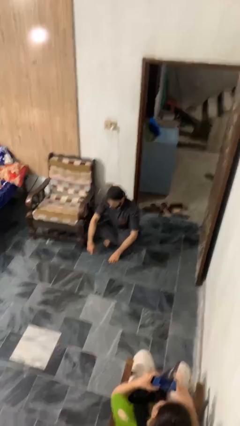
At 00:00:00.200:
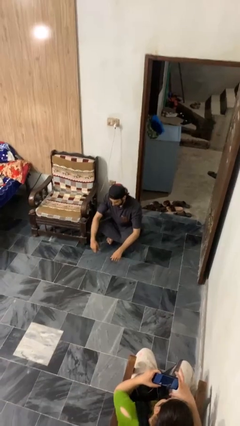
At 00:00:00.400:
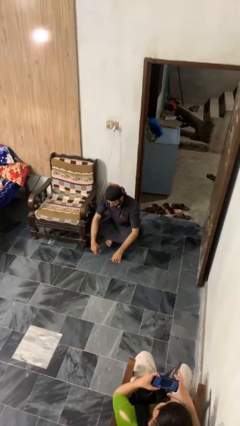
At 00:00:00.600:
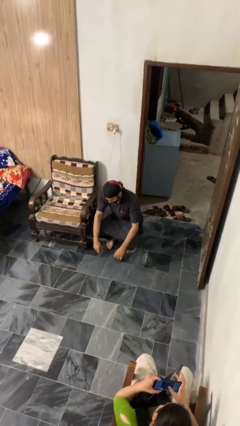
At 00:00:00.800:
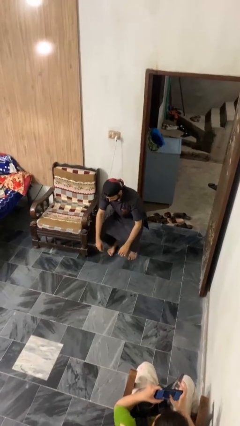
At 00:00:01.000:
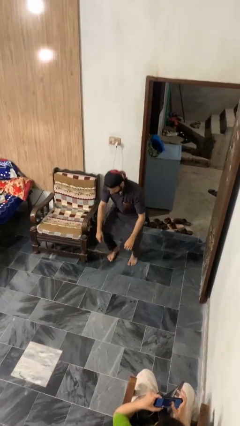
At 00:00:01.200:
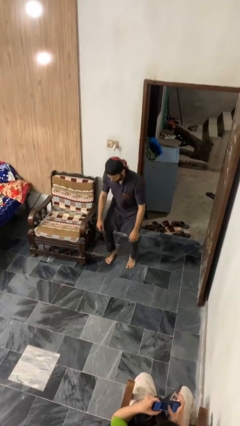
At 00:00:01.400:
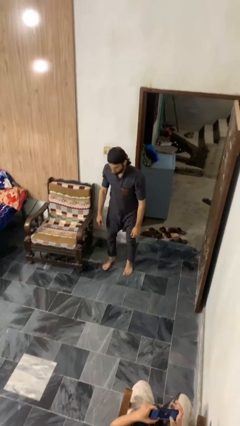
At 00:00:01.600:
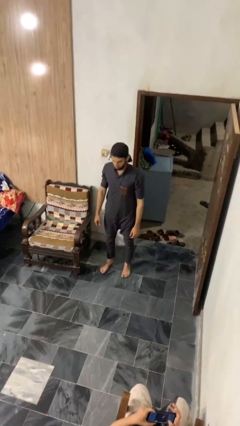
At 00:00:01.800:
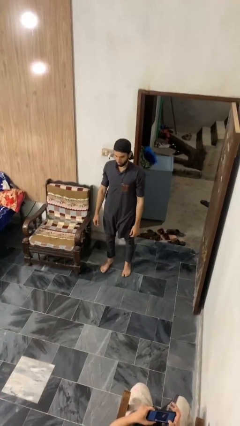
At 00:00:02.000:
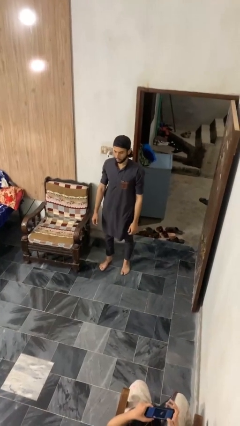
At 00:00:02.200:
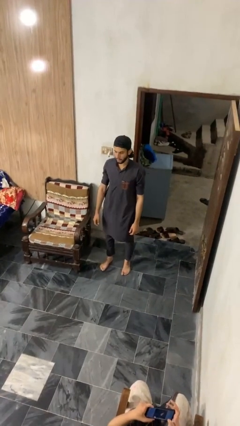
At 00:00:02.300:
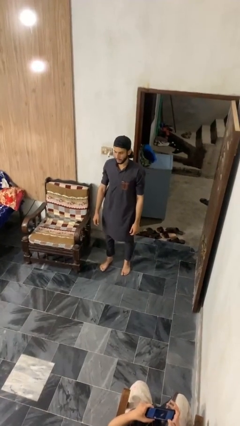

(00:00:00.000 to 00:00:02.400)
person stands up

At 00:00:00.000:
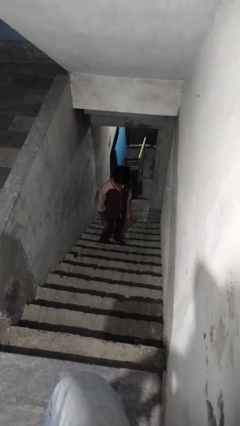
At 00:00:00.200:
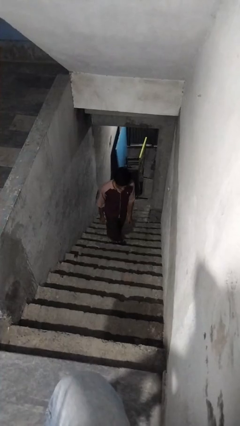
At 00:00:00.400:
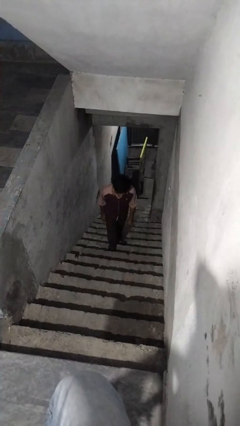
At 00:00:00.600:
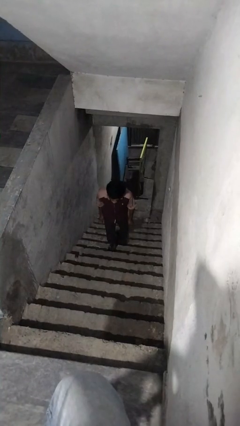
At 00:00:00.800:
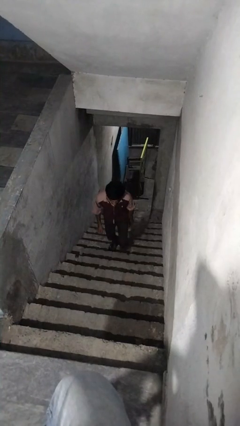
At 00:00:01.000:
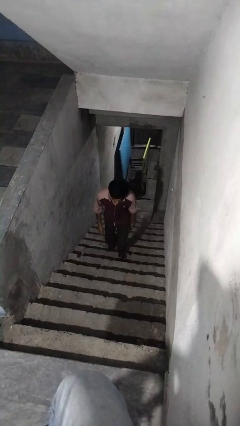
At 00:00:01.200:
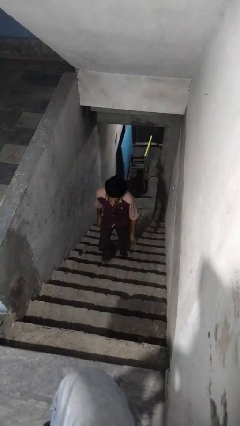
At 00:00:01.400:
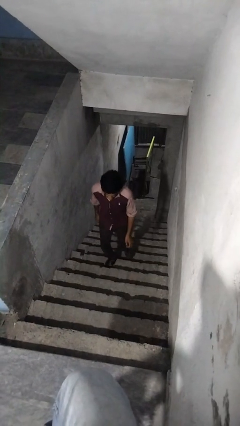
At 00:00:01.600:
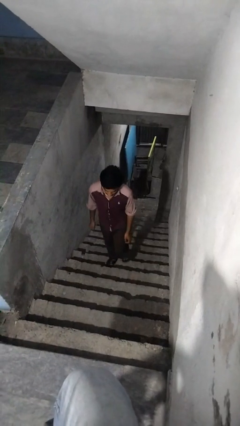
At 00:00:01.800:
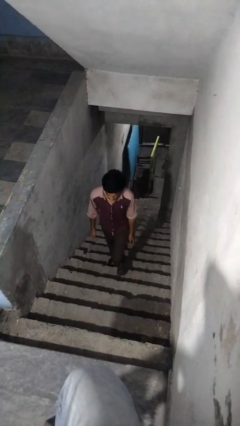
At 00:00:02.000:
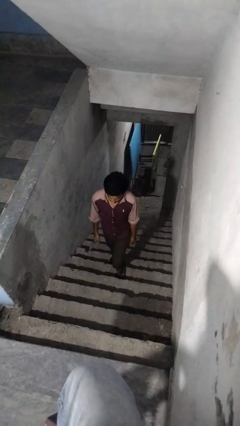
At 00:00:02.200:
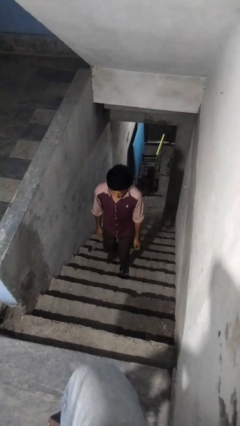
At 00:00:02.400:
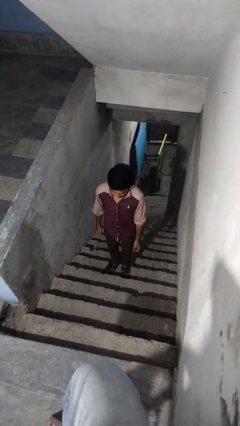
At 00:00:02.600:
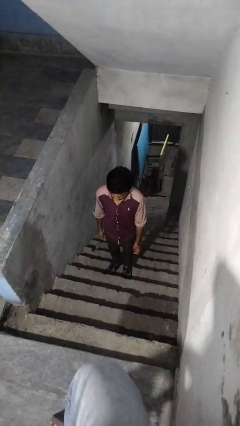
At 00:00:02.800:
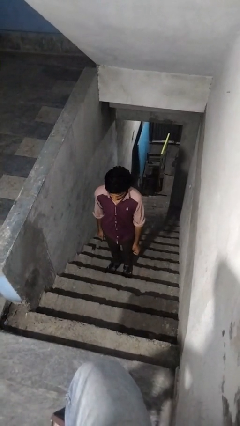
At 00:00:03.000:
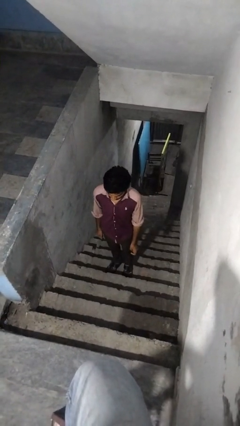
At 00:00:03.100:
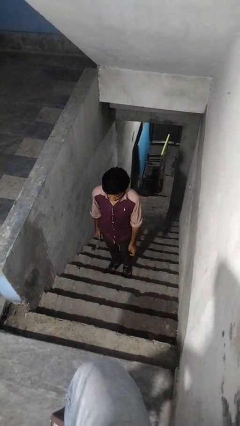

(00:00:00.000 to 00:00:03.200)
person climbs up stairs

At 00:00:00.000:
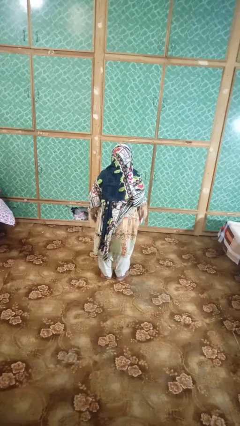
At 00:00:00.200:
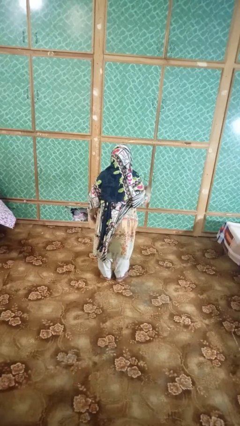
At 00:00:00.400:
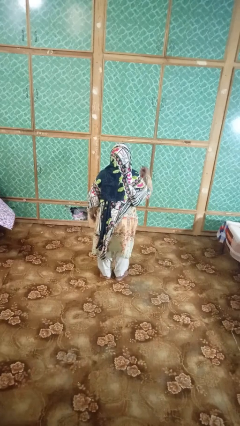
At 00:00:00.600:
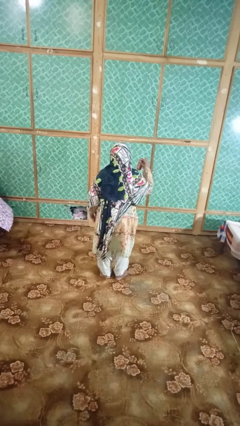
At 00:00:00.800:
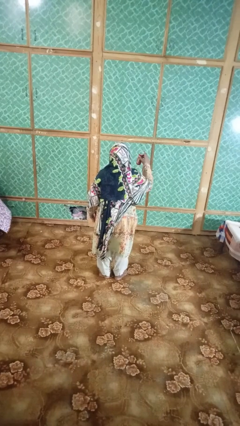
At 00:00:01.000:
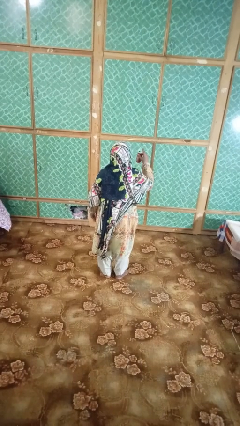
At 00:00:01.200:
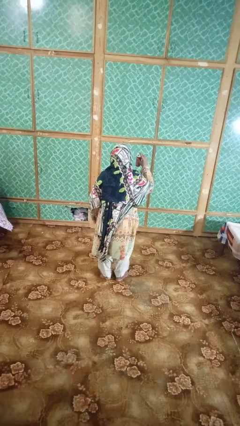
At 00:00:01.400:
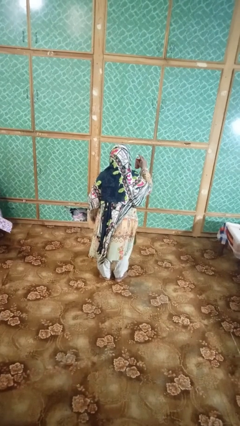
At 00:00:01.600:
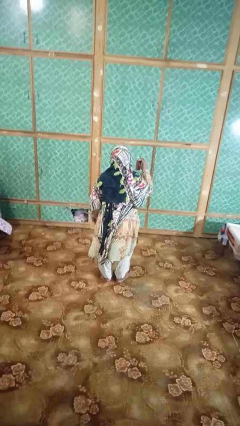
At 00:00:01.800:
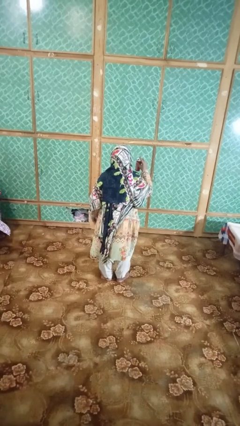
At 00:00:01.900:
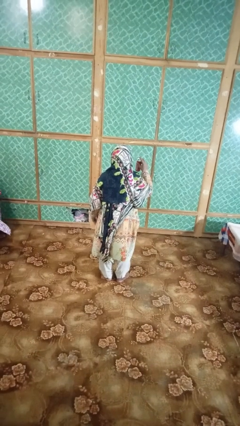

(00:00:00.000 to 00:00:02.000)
person opens beverage can

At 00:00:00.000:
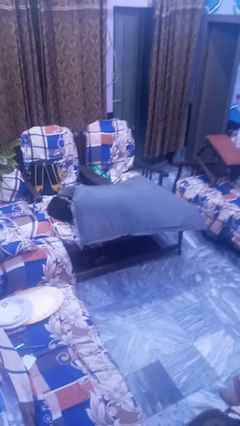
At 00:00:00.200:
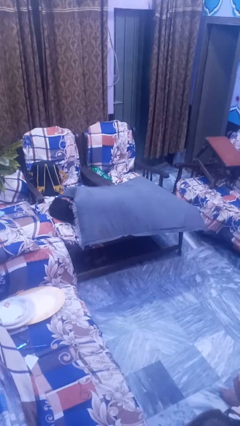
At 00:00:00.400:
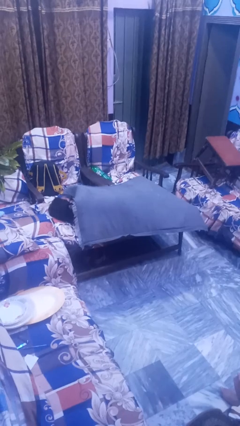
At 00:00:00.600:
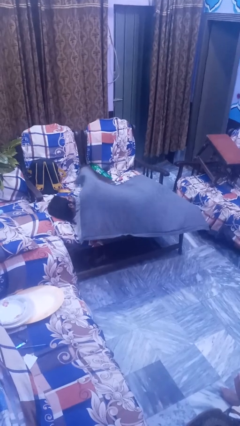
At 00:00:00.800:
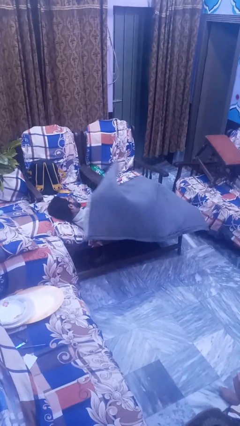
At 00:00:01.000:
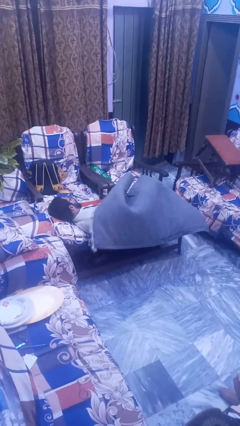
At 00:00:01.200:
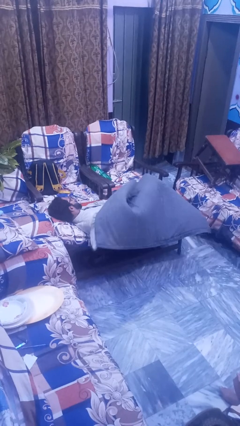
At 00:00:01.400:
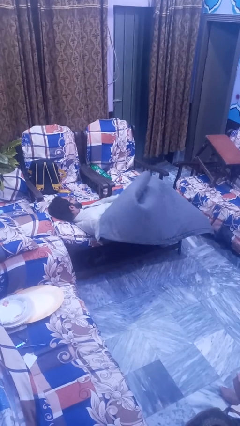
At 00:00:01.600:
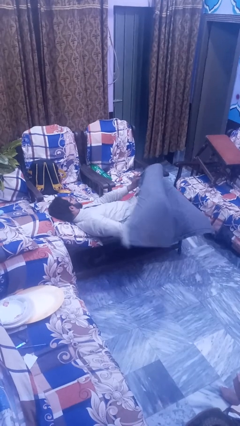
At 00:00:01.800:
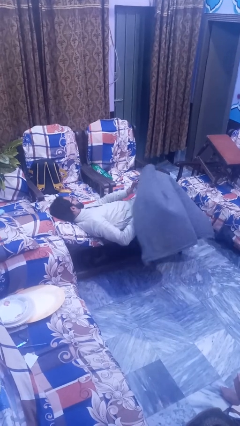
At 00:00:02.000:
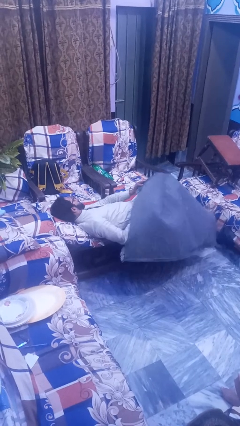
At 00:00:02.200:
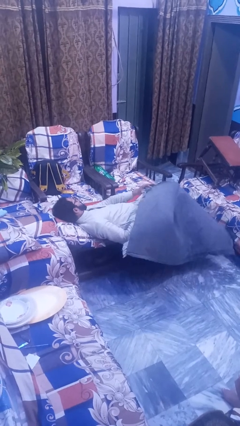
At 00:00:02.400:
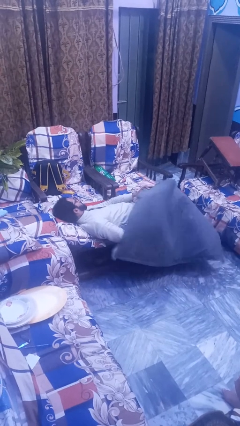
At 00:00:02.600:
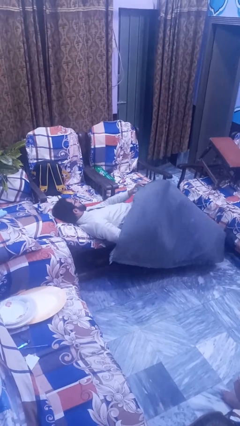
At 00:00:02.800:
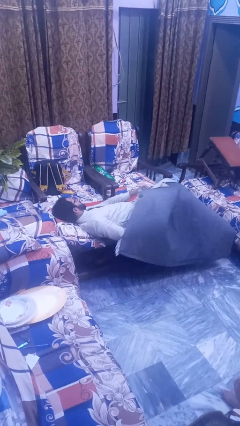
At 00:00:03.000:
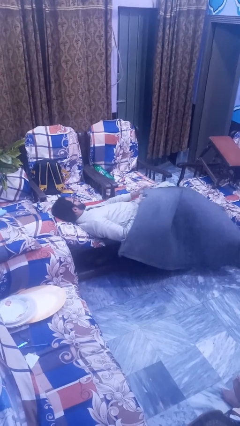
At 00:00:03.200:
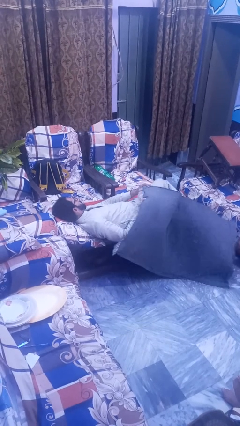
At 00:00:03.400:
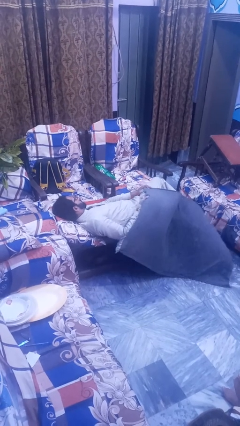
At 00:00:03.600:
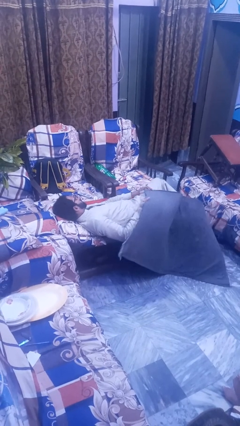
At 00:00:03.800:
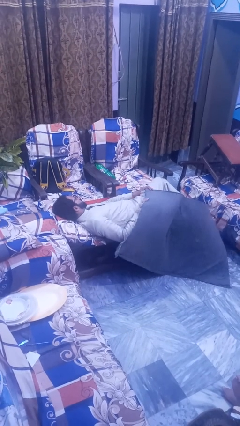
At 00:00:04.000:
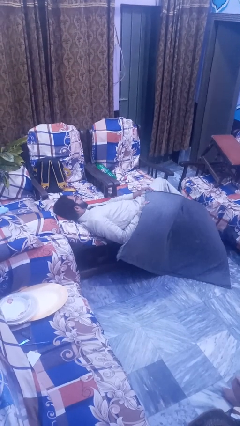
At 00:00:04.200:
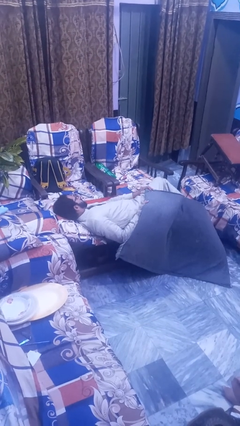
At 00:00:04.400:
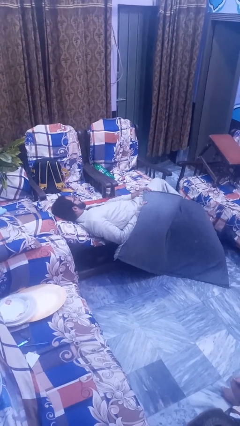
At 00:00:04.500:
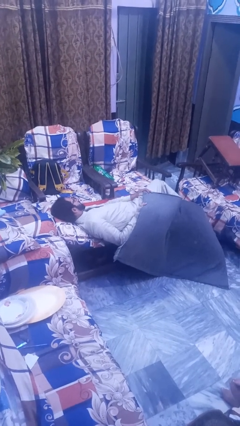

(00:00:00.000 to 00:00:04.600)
person uncovers with blanket

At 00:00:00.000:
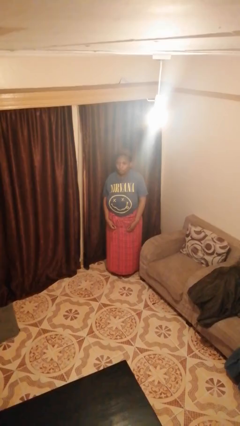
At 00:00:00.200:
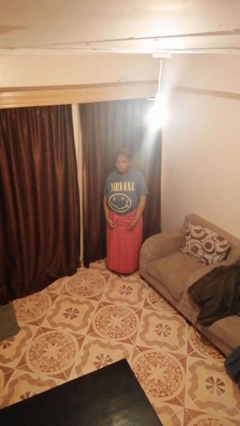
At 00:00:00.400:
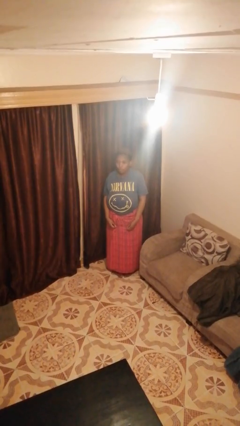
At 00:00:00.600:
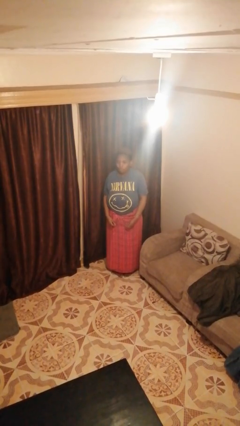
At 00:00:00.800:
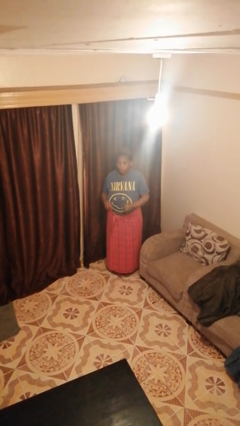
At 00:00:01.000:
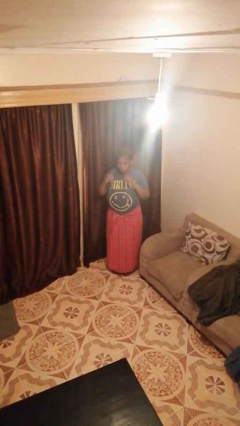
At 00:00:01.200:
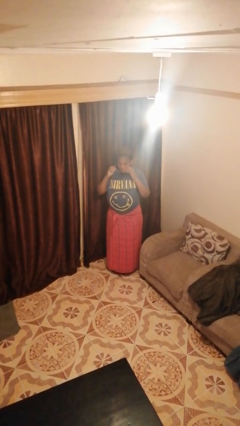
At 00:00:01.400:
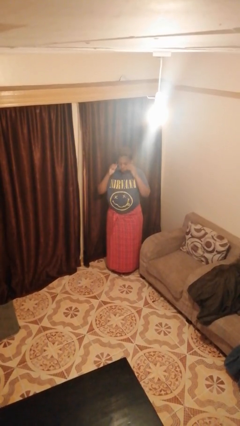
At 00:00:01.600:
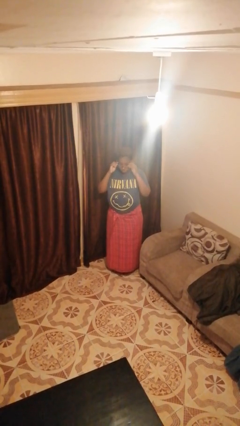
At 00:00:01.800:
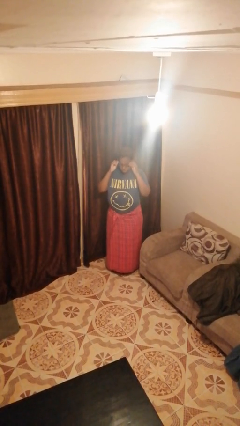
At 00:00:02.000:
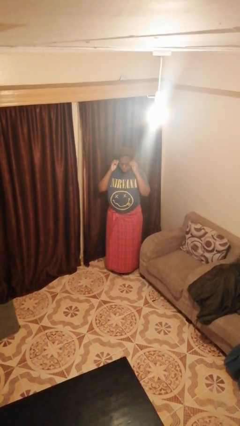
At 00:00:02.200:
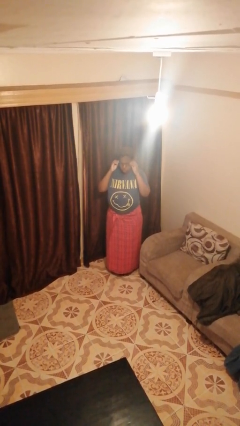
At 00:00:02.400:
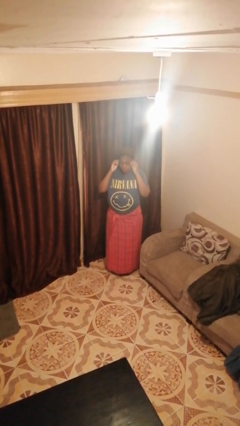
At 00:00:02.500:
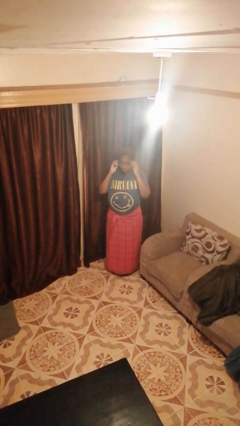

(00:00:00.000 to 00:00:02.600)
person puts on glasses

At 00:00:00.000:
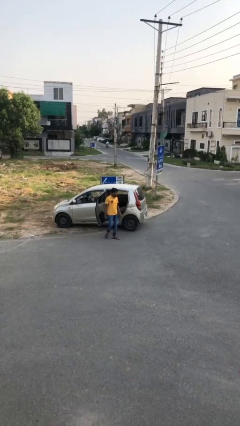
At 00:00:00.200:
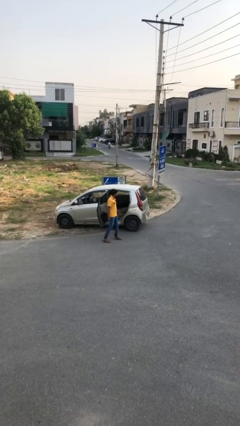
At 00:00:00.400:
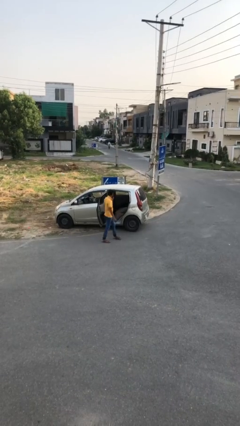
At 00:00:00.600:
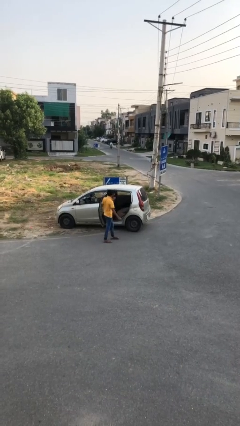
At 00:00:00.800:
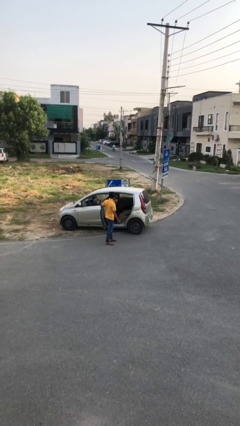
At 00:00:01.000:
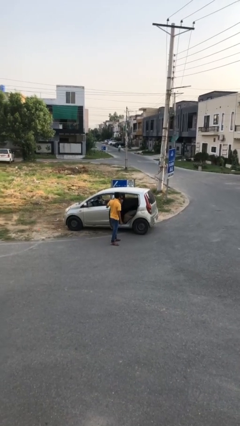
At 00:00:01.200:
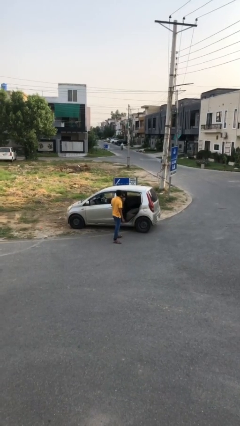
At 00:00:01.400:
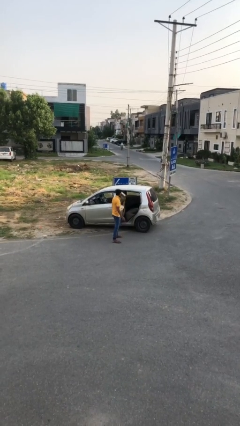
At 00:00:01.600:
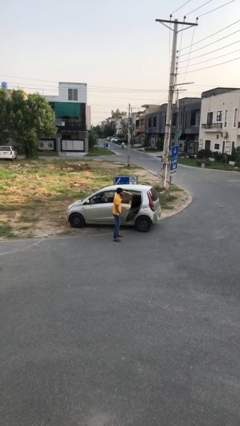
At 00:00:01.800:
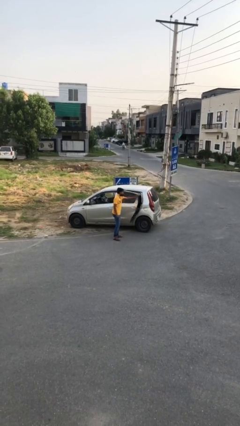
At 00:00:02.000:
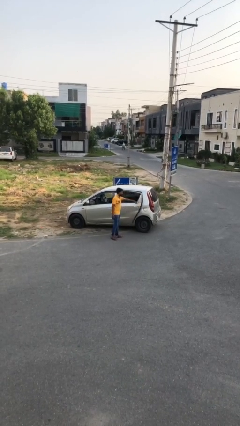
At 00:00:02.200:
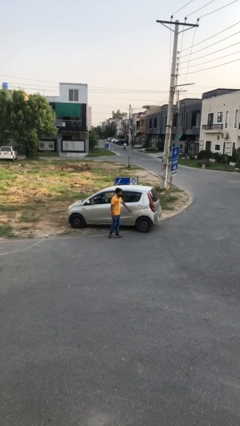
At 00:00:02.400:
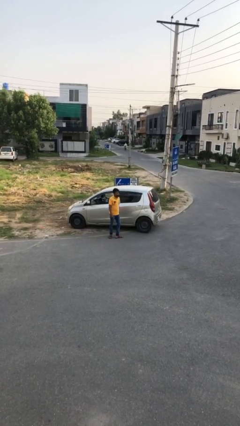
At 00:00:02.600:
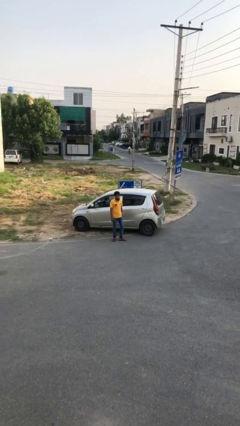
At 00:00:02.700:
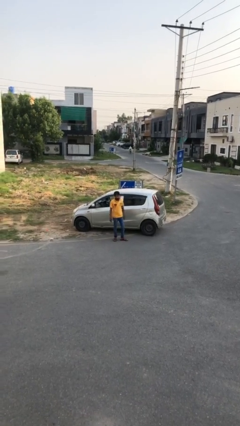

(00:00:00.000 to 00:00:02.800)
person closes car door
